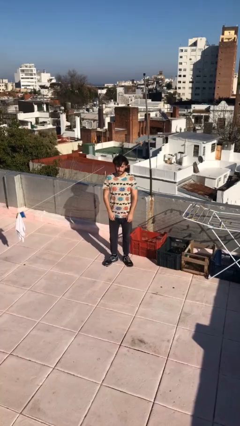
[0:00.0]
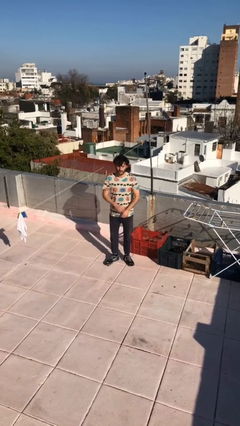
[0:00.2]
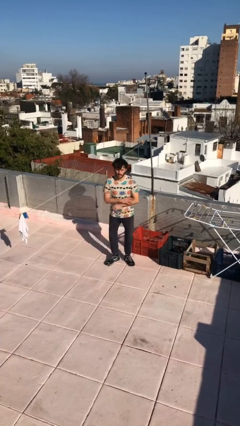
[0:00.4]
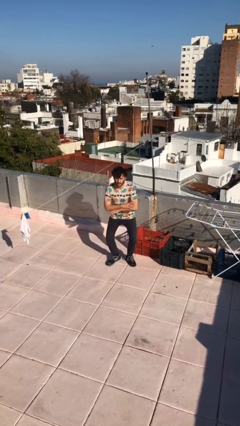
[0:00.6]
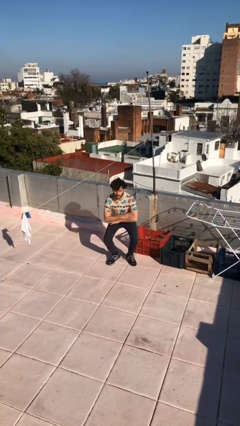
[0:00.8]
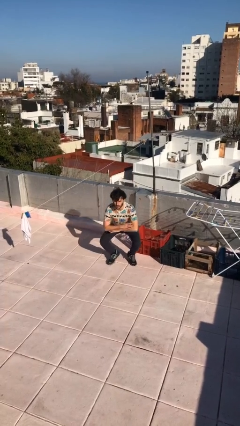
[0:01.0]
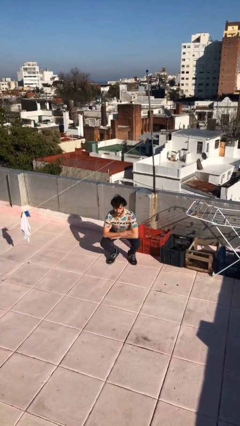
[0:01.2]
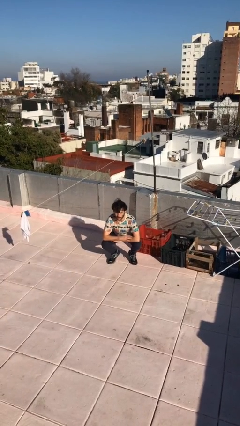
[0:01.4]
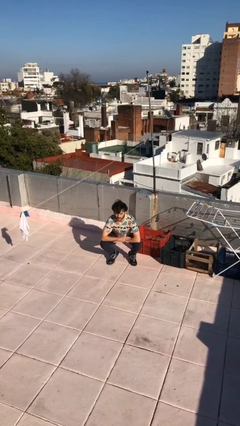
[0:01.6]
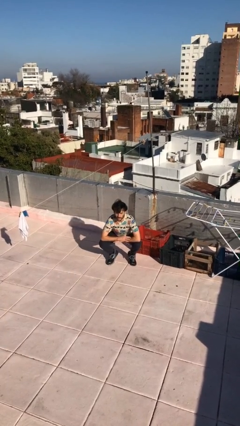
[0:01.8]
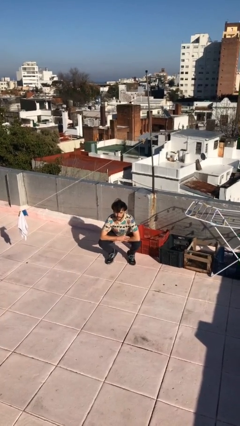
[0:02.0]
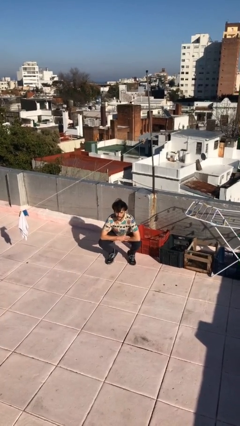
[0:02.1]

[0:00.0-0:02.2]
person squats

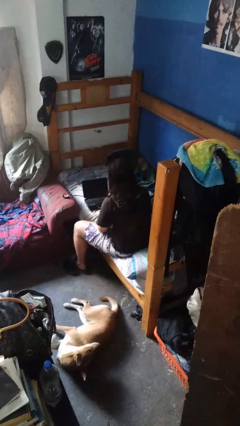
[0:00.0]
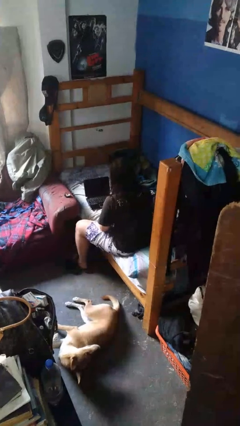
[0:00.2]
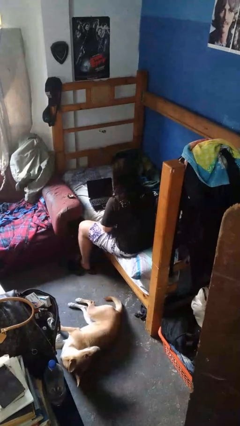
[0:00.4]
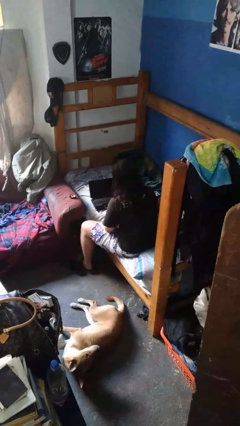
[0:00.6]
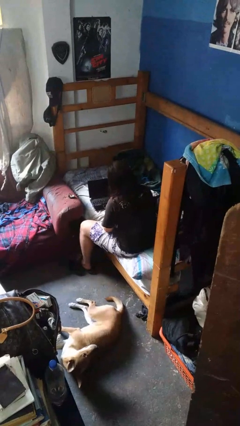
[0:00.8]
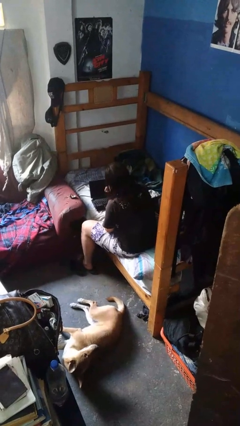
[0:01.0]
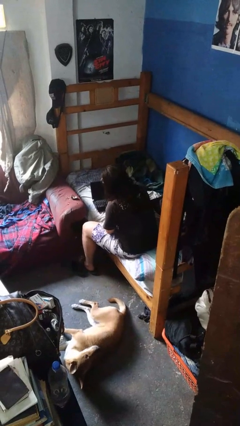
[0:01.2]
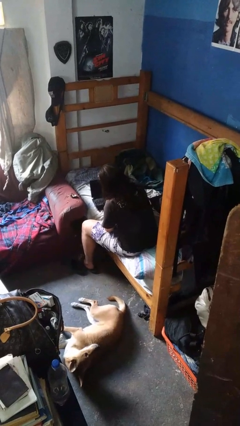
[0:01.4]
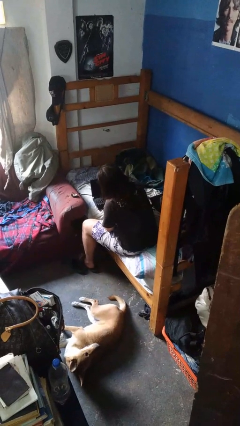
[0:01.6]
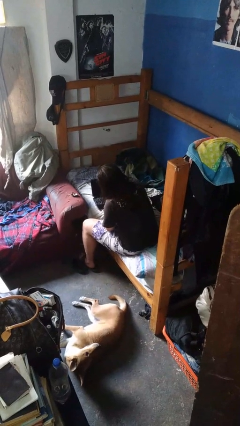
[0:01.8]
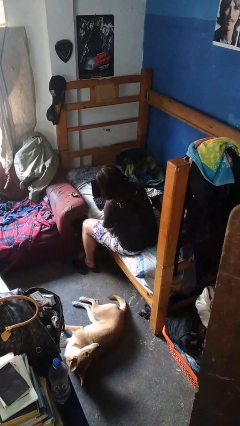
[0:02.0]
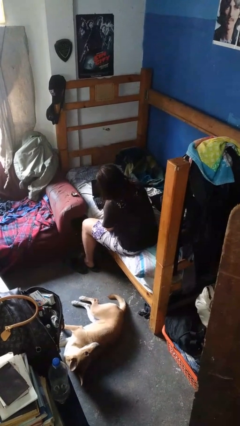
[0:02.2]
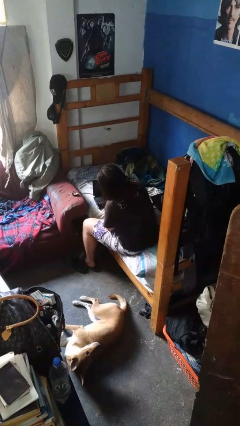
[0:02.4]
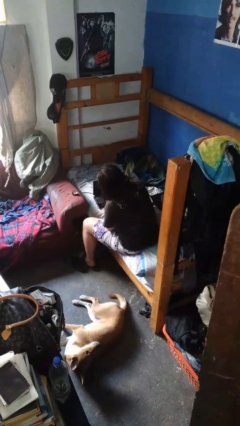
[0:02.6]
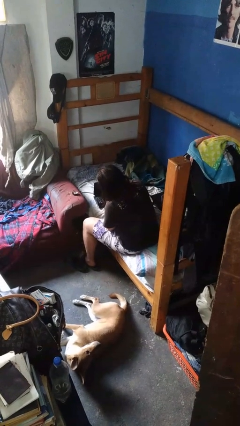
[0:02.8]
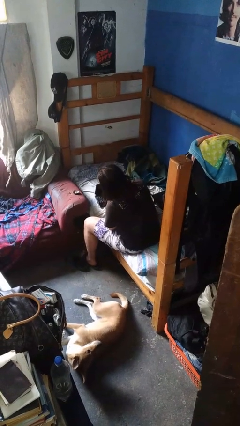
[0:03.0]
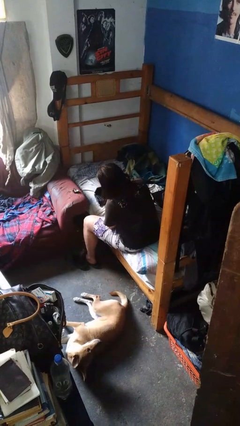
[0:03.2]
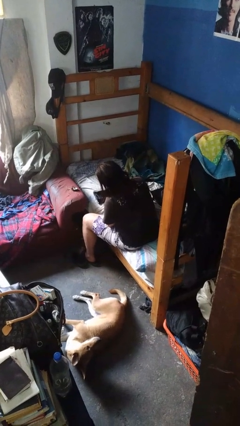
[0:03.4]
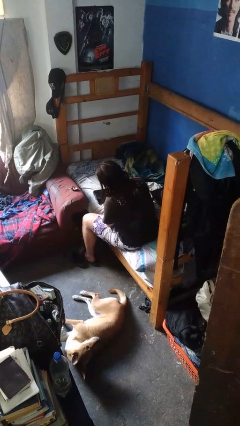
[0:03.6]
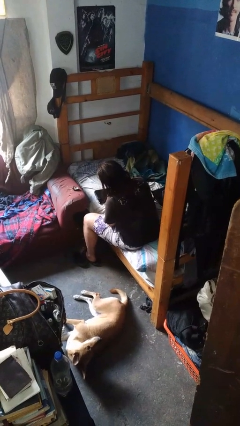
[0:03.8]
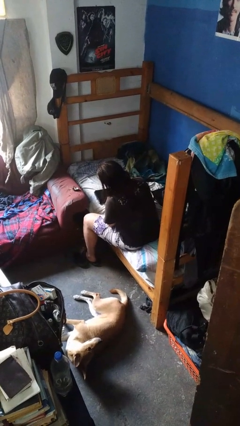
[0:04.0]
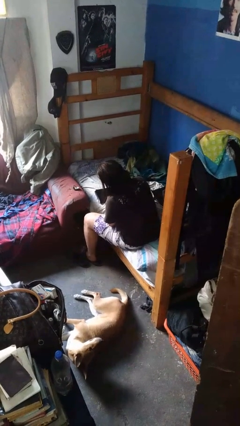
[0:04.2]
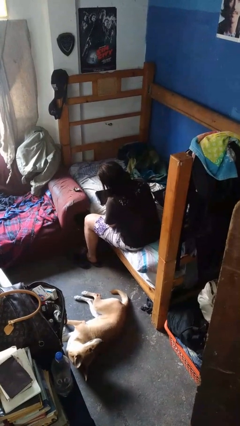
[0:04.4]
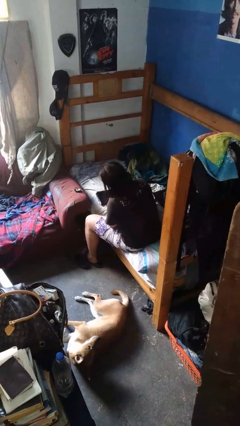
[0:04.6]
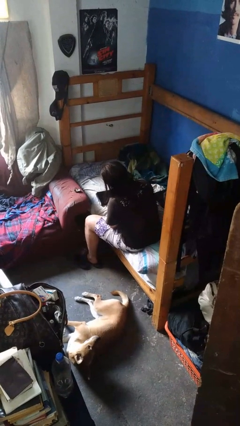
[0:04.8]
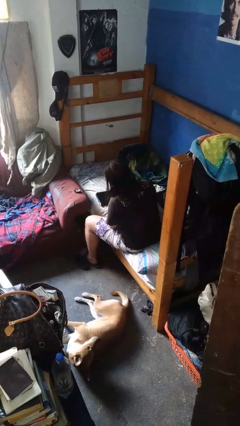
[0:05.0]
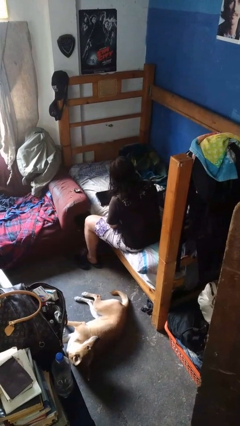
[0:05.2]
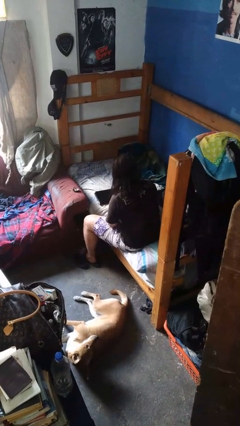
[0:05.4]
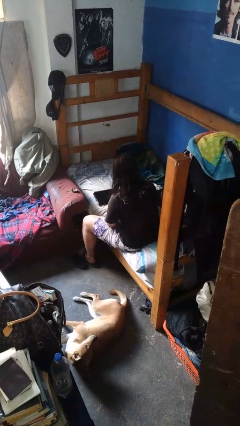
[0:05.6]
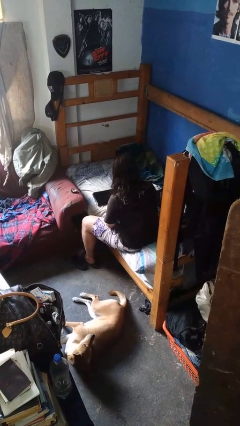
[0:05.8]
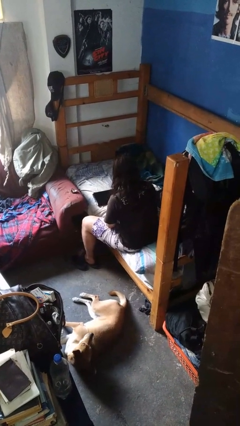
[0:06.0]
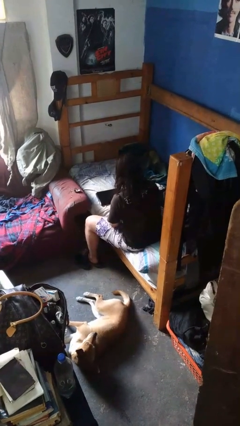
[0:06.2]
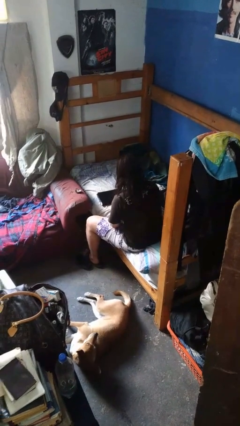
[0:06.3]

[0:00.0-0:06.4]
person closes laptop

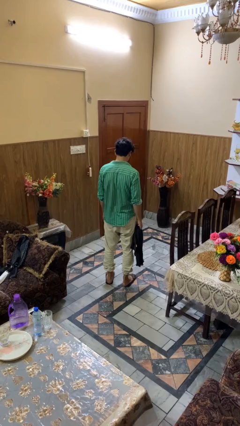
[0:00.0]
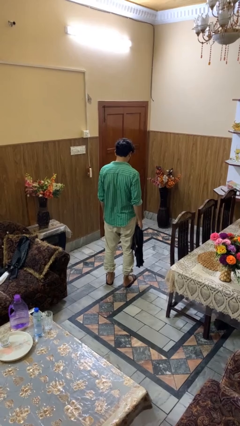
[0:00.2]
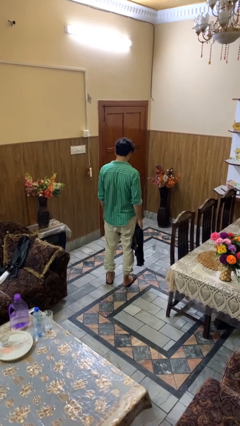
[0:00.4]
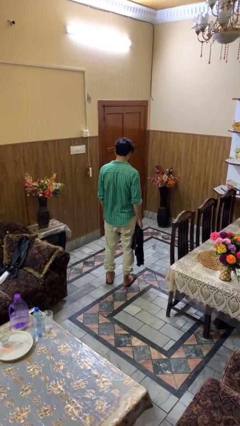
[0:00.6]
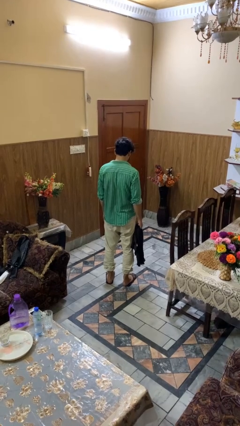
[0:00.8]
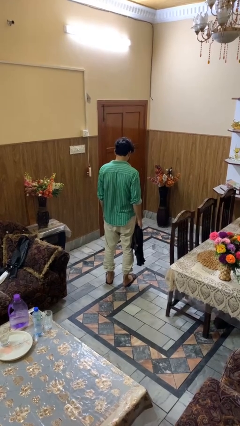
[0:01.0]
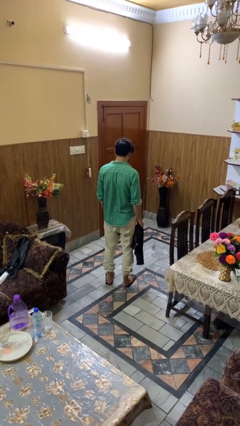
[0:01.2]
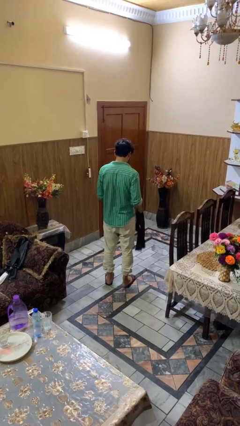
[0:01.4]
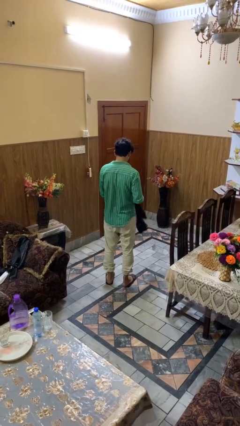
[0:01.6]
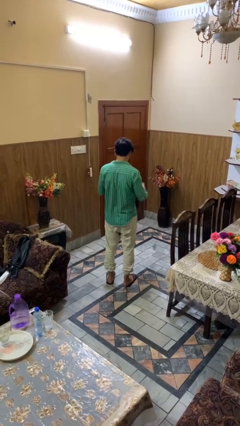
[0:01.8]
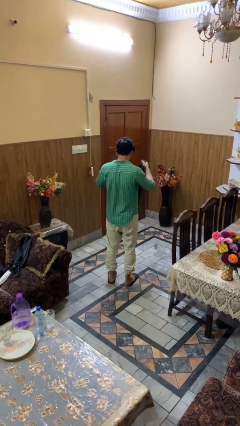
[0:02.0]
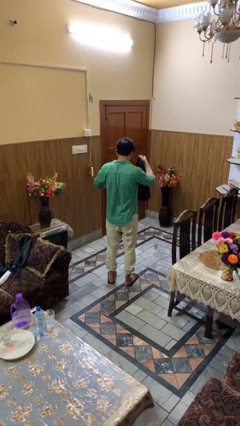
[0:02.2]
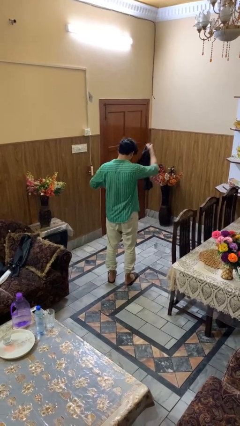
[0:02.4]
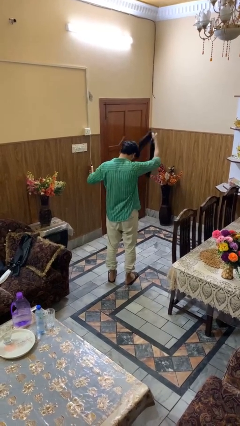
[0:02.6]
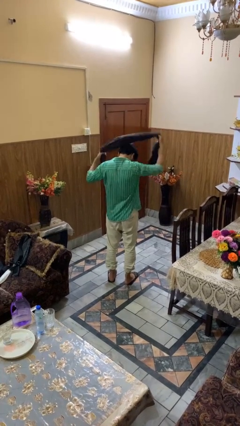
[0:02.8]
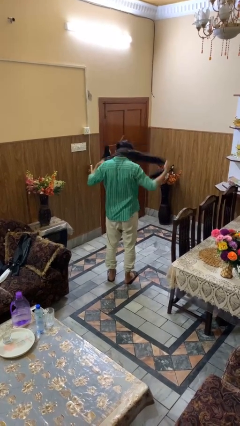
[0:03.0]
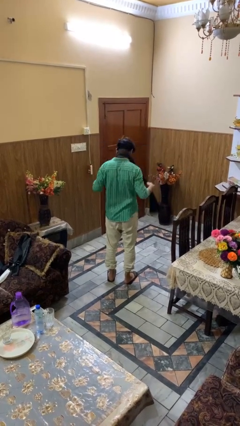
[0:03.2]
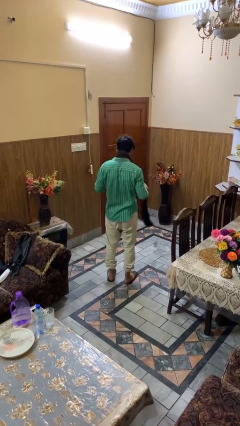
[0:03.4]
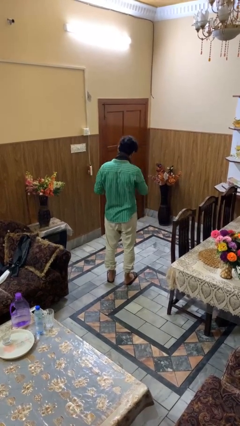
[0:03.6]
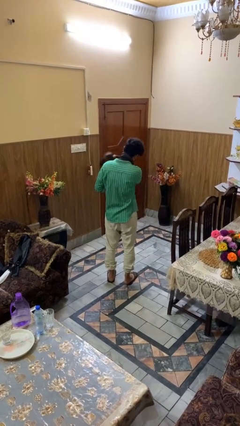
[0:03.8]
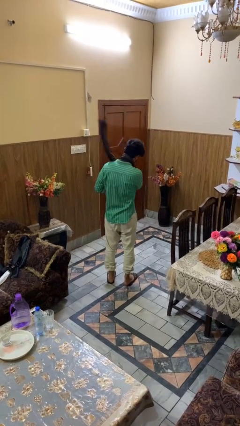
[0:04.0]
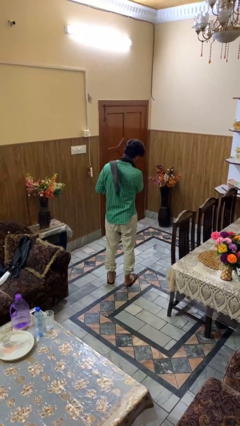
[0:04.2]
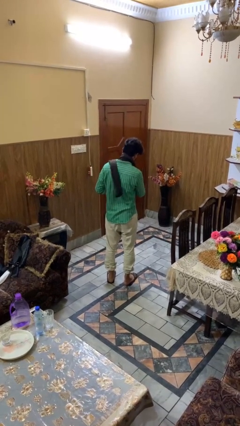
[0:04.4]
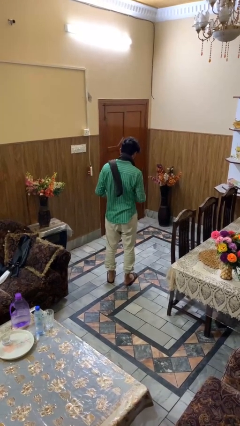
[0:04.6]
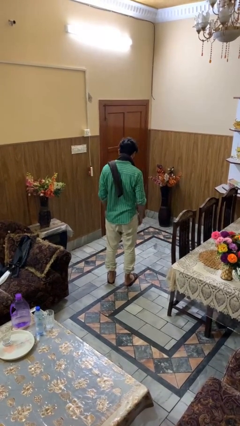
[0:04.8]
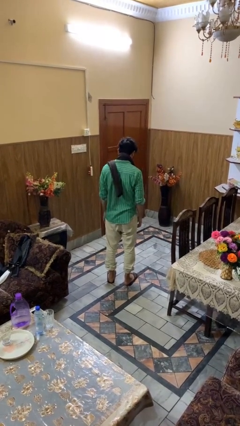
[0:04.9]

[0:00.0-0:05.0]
person puts on scarf

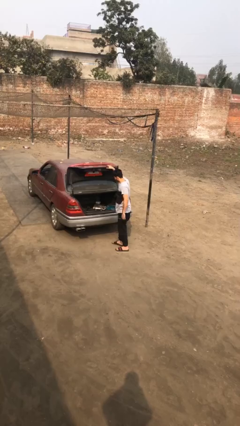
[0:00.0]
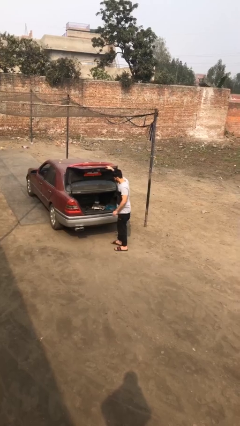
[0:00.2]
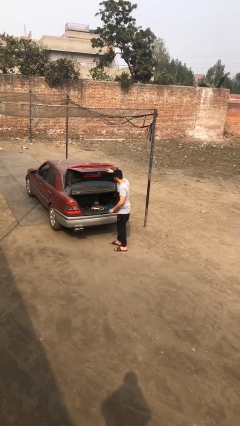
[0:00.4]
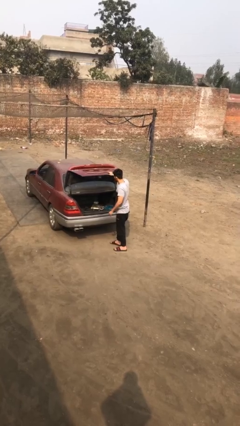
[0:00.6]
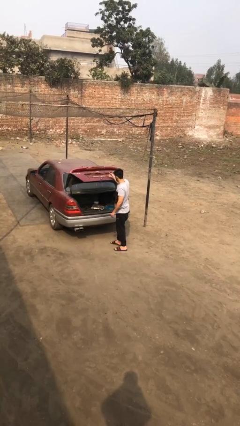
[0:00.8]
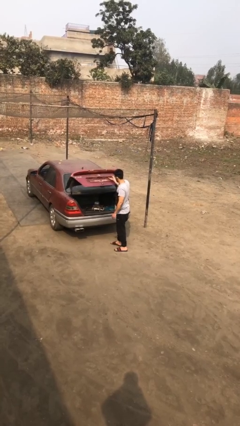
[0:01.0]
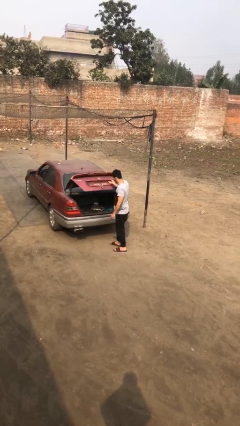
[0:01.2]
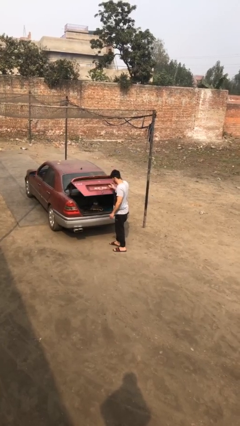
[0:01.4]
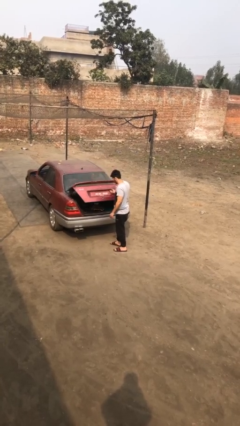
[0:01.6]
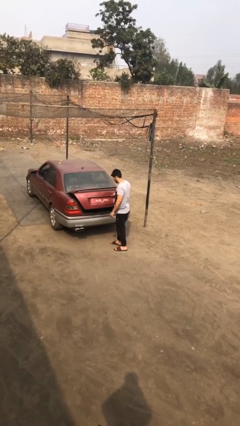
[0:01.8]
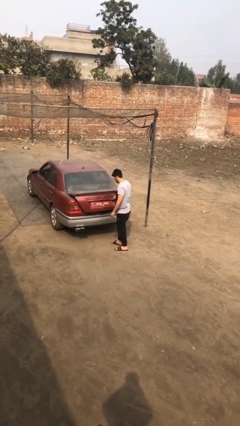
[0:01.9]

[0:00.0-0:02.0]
person closes car trunk

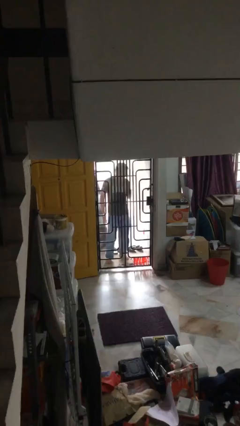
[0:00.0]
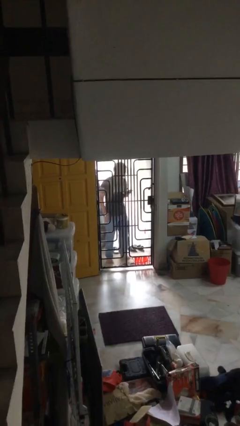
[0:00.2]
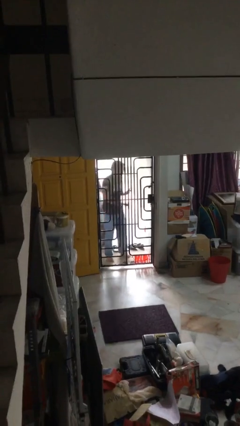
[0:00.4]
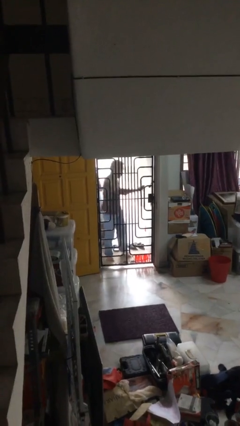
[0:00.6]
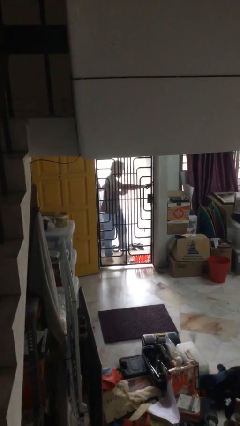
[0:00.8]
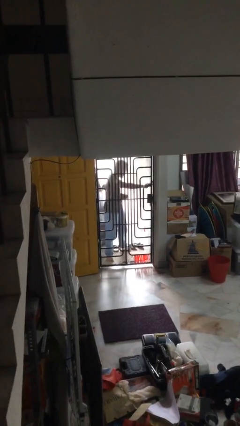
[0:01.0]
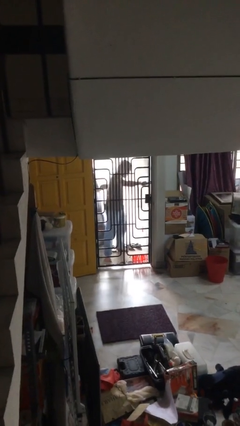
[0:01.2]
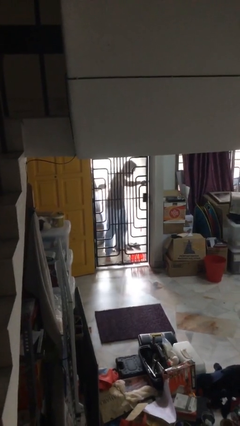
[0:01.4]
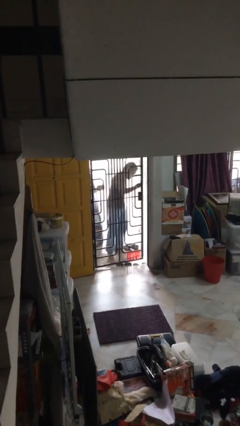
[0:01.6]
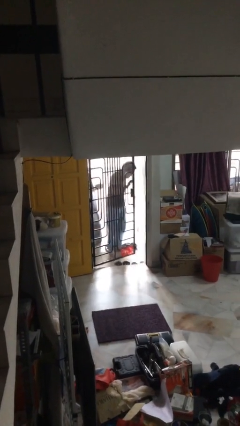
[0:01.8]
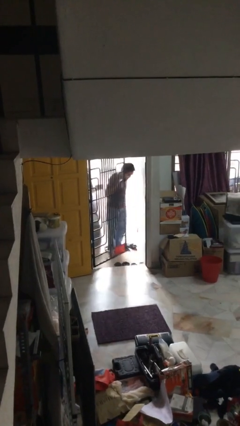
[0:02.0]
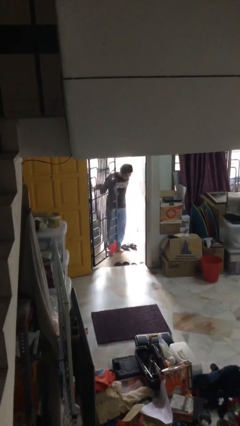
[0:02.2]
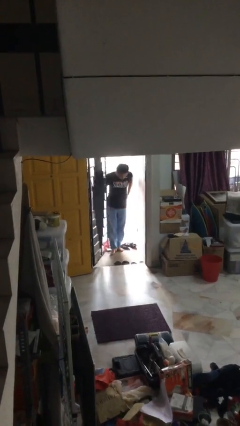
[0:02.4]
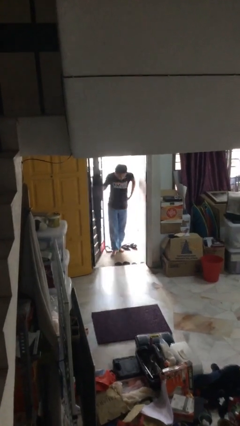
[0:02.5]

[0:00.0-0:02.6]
person opens facility door
